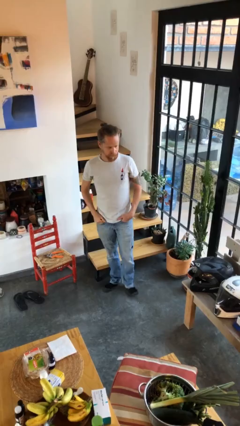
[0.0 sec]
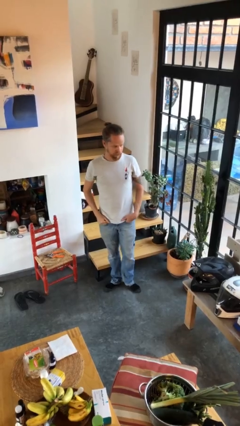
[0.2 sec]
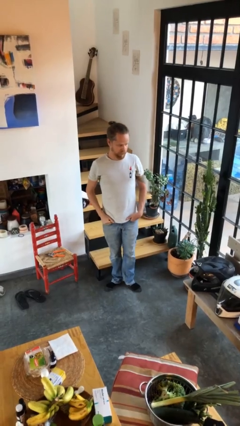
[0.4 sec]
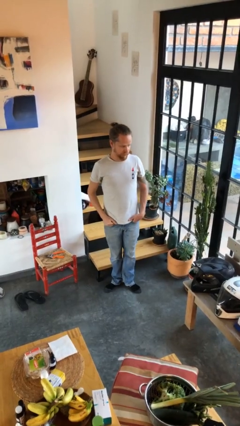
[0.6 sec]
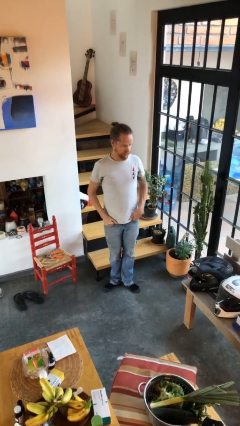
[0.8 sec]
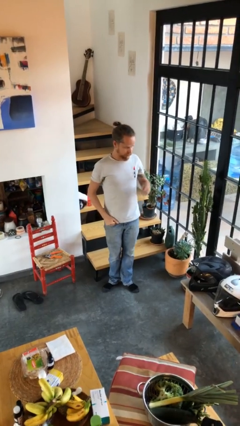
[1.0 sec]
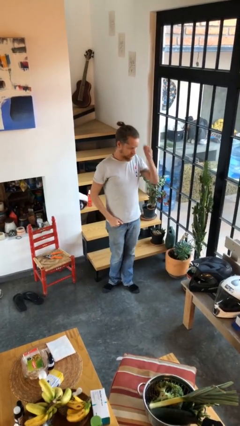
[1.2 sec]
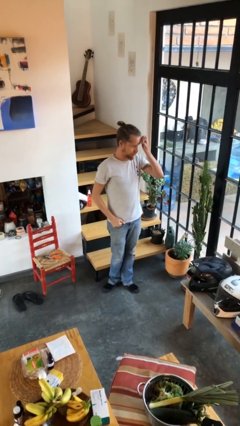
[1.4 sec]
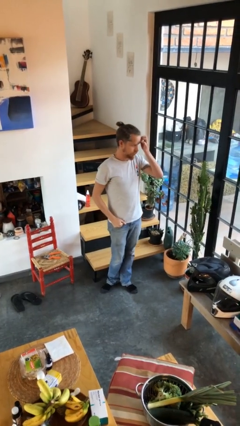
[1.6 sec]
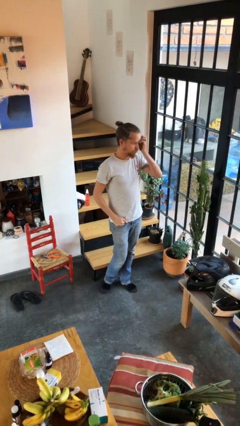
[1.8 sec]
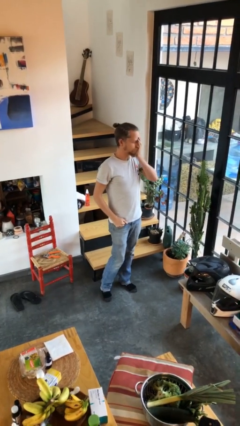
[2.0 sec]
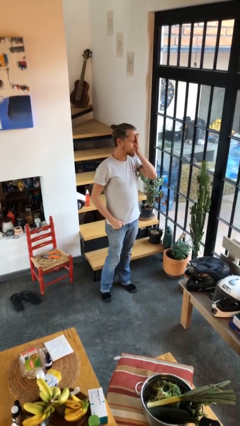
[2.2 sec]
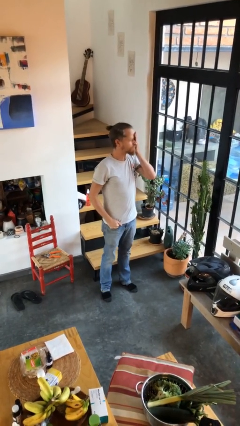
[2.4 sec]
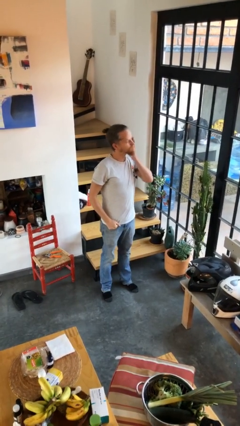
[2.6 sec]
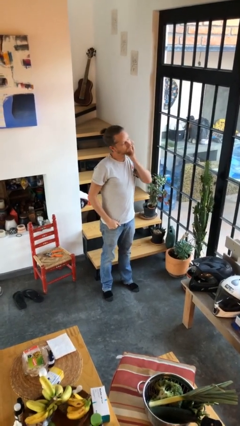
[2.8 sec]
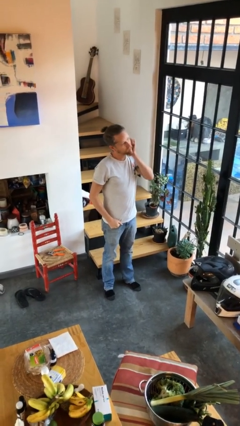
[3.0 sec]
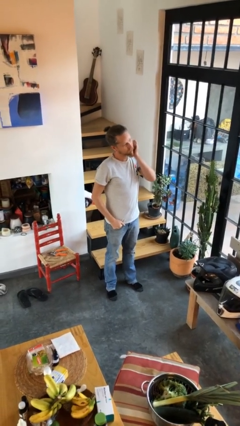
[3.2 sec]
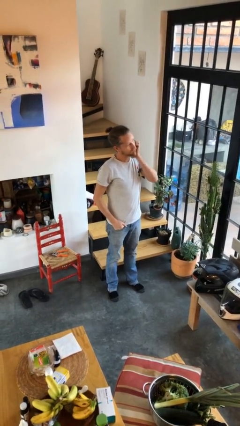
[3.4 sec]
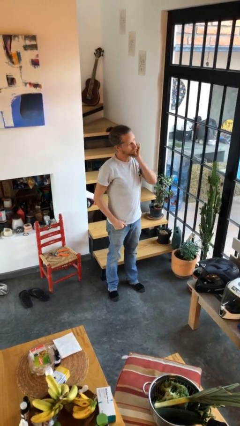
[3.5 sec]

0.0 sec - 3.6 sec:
person scratches face

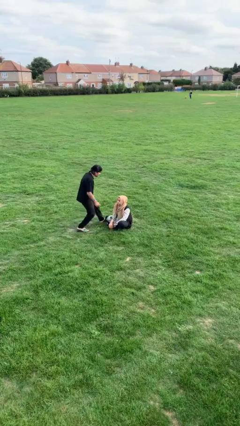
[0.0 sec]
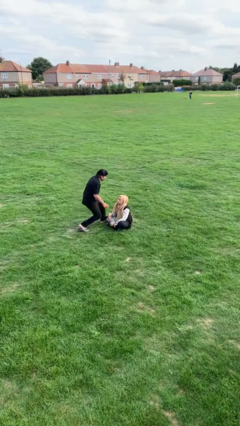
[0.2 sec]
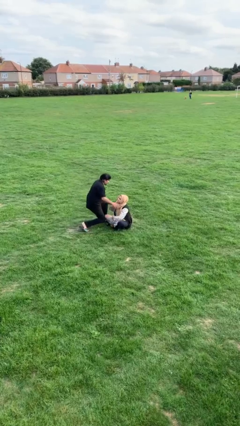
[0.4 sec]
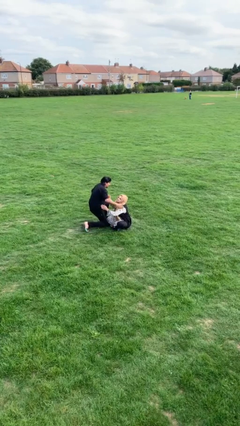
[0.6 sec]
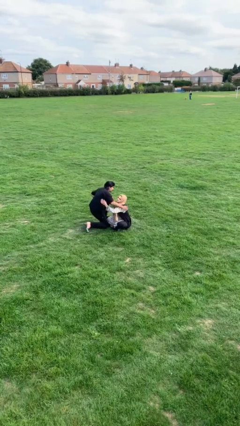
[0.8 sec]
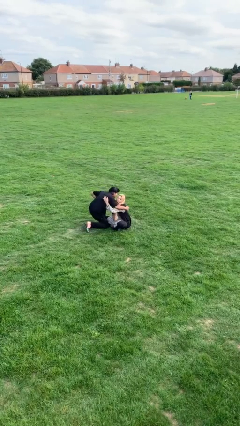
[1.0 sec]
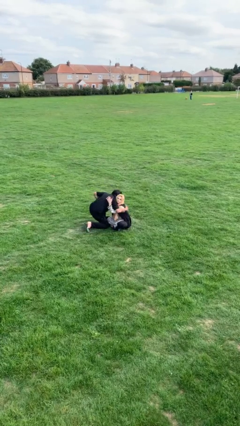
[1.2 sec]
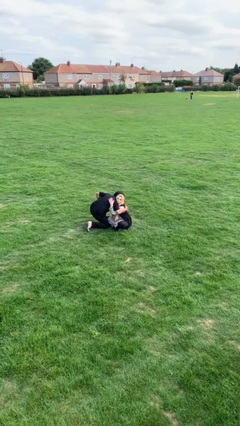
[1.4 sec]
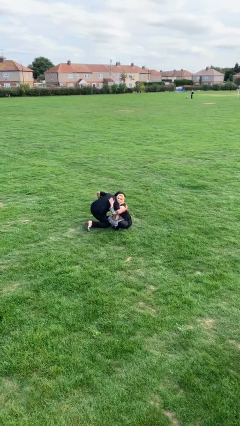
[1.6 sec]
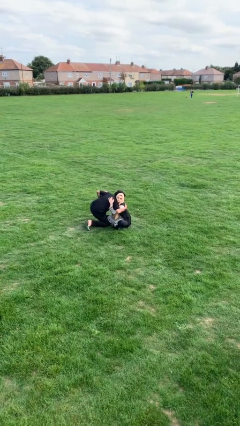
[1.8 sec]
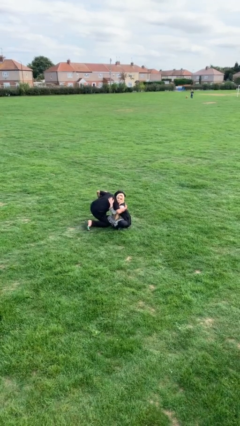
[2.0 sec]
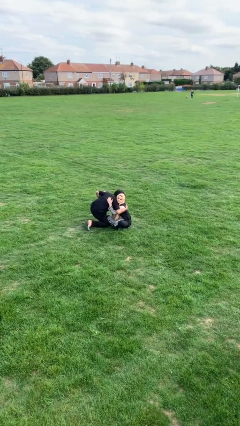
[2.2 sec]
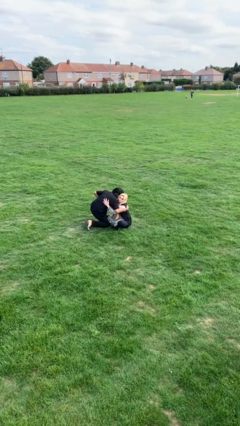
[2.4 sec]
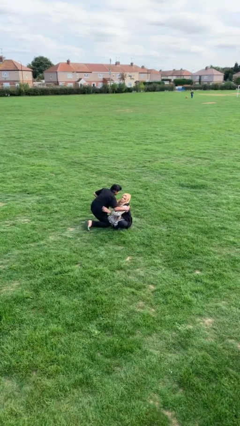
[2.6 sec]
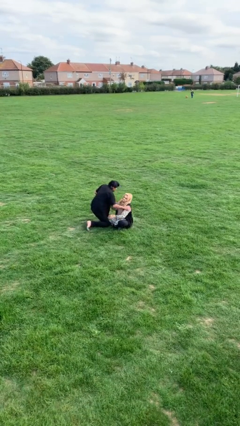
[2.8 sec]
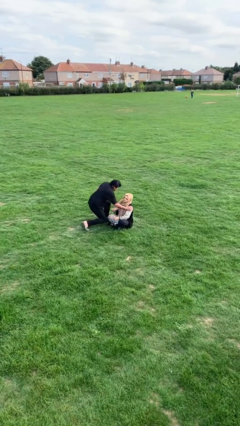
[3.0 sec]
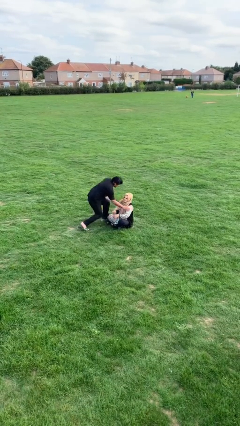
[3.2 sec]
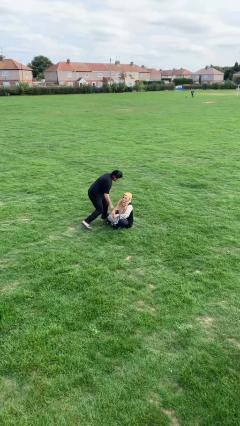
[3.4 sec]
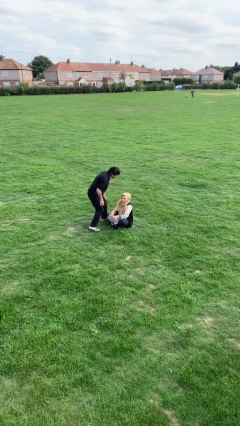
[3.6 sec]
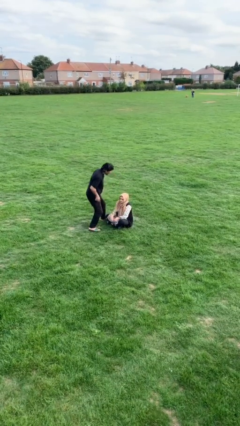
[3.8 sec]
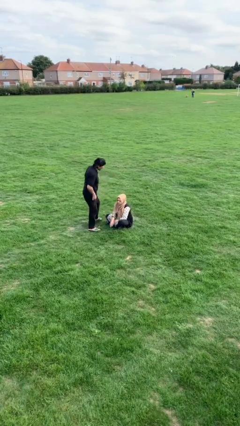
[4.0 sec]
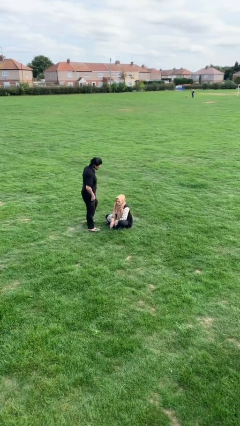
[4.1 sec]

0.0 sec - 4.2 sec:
person embraces person

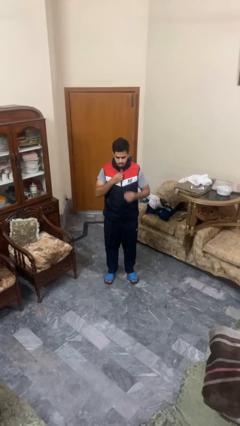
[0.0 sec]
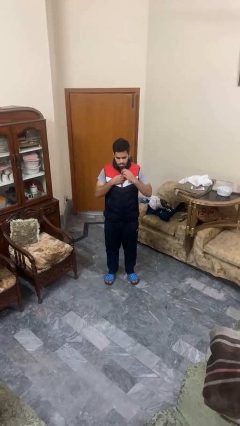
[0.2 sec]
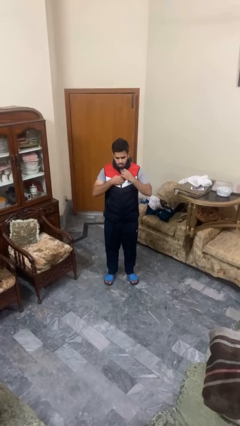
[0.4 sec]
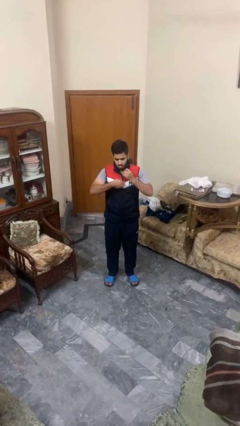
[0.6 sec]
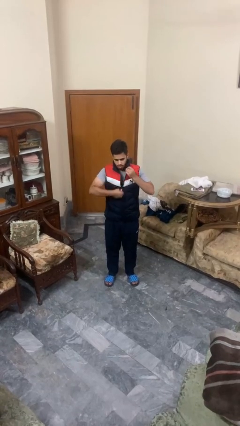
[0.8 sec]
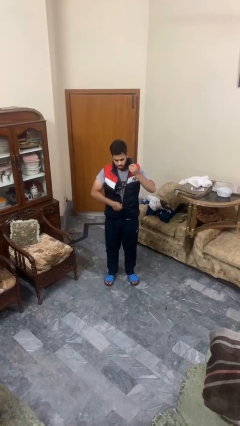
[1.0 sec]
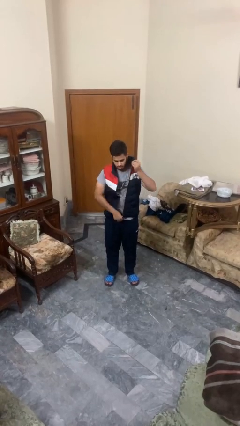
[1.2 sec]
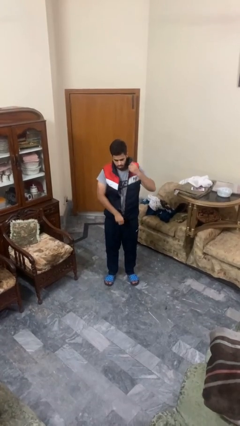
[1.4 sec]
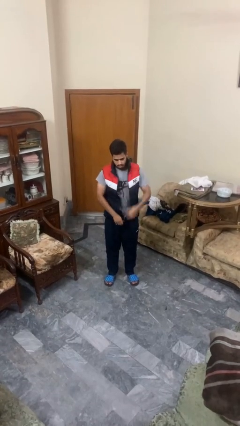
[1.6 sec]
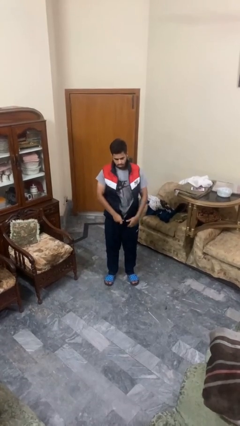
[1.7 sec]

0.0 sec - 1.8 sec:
person unzips jacket

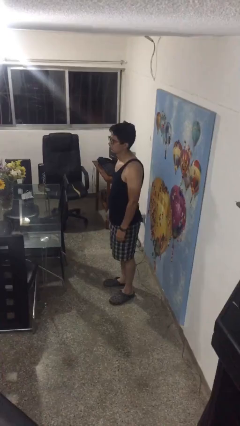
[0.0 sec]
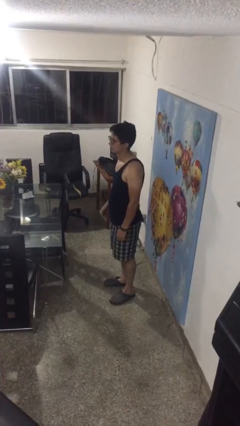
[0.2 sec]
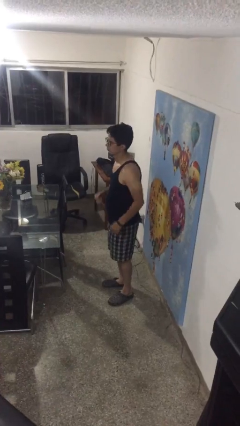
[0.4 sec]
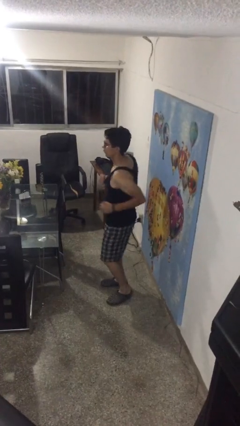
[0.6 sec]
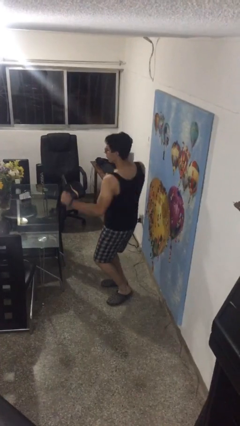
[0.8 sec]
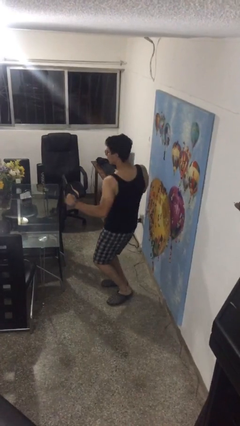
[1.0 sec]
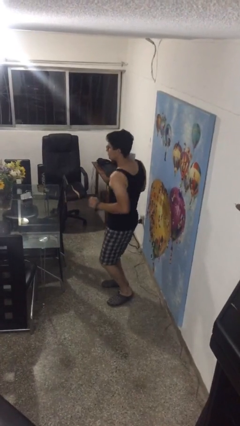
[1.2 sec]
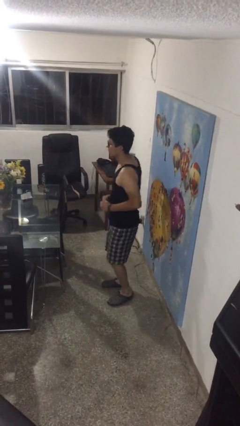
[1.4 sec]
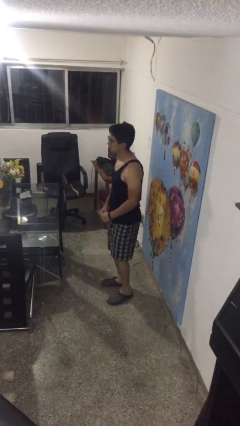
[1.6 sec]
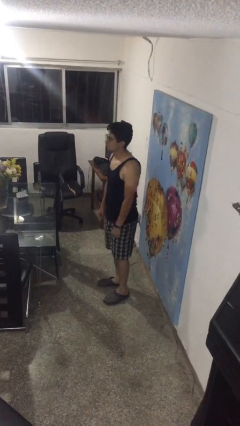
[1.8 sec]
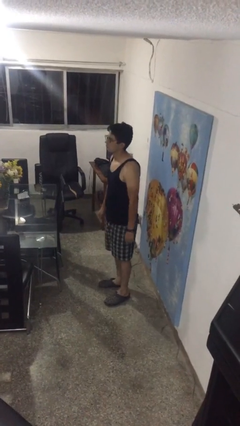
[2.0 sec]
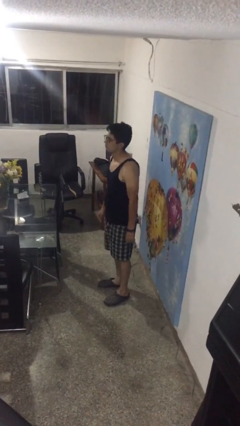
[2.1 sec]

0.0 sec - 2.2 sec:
person punches

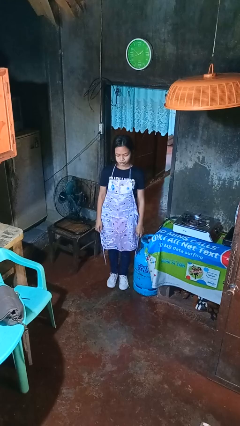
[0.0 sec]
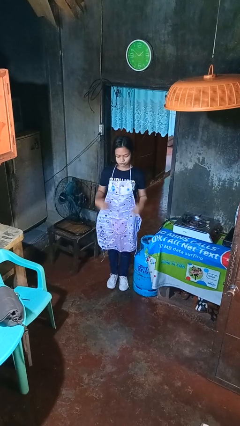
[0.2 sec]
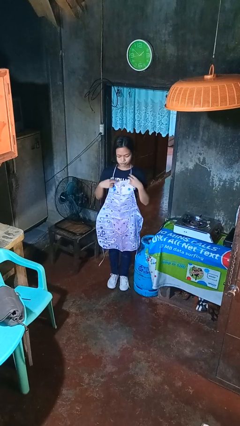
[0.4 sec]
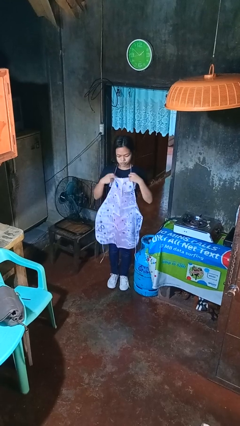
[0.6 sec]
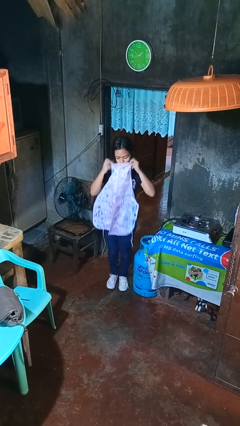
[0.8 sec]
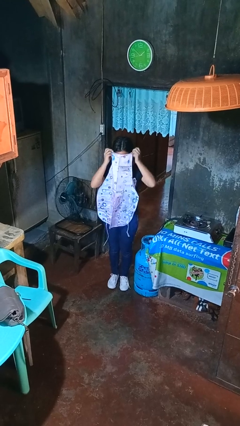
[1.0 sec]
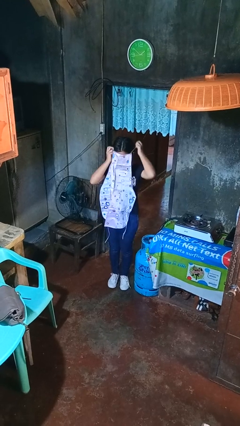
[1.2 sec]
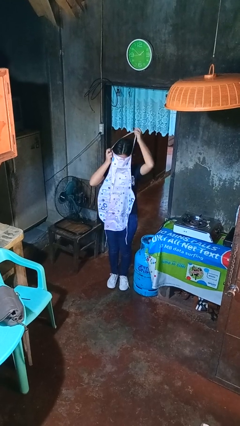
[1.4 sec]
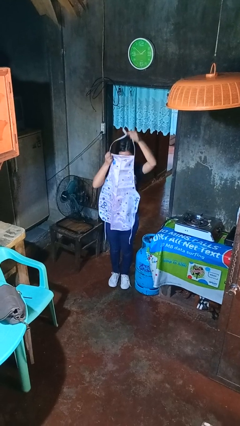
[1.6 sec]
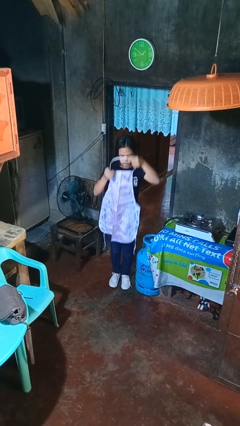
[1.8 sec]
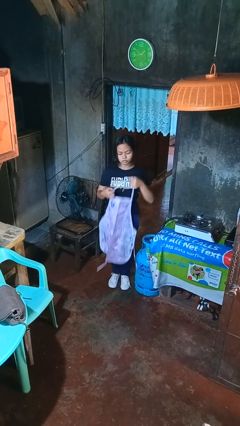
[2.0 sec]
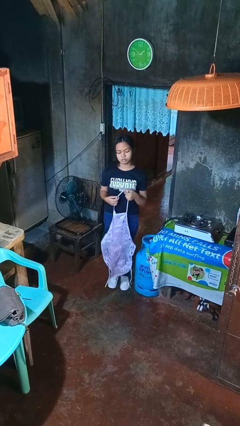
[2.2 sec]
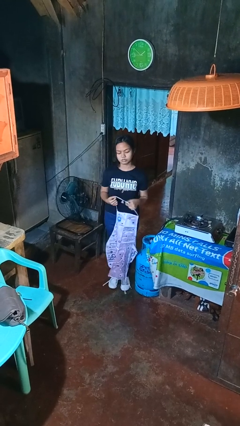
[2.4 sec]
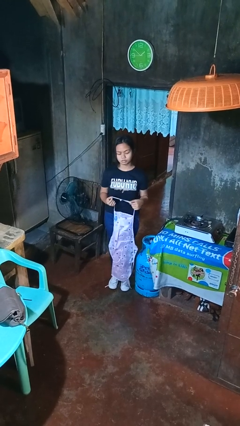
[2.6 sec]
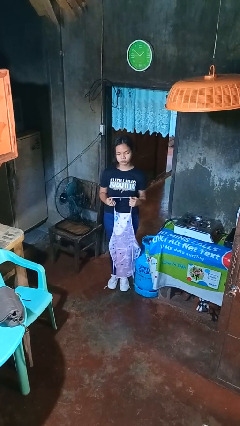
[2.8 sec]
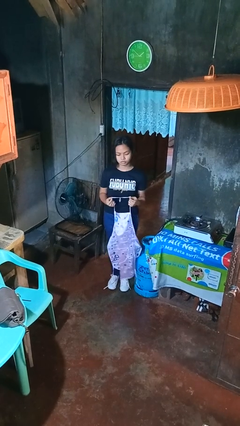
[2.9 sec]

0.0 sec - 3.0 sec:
person takes off apron

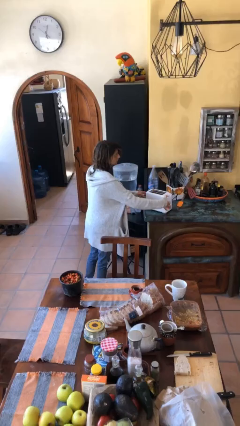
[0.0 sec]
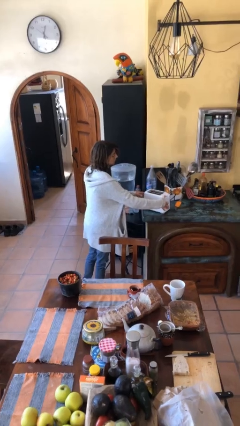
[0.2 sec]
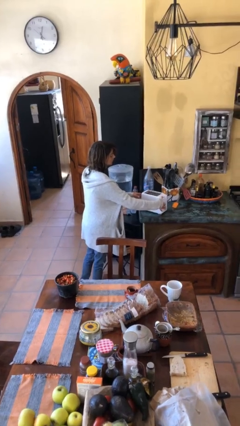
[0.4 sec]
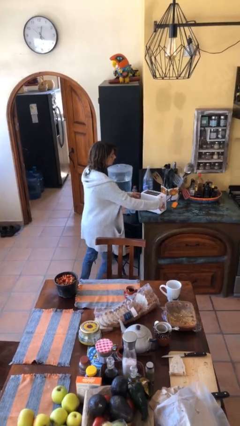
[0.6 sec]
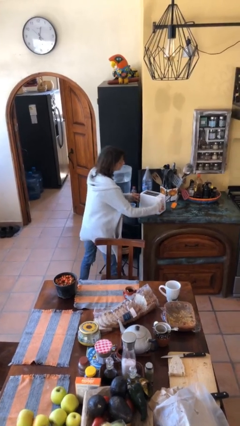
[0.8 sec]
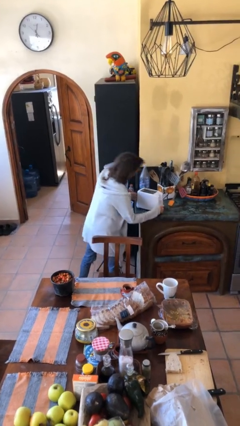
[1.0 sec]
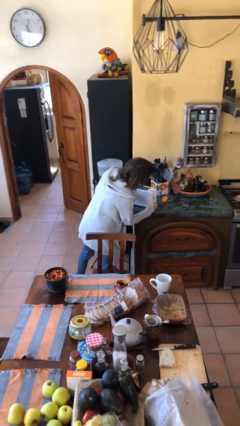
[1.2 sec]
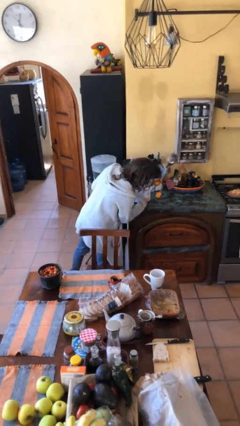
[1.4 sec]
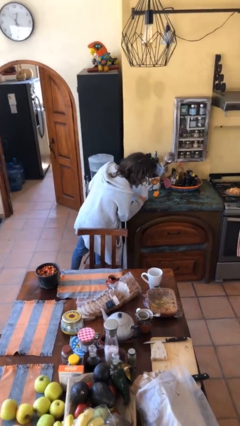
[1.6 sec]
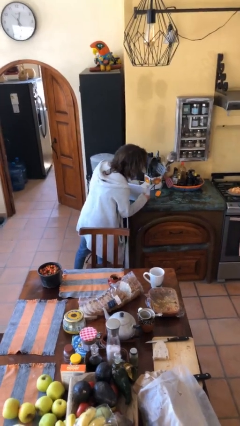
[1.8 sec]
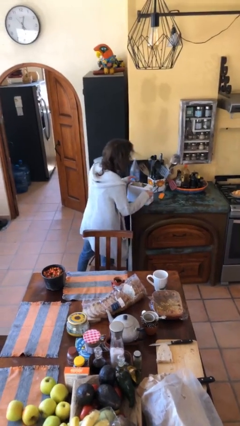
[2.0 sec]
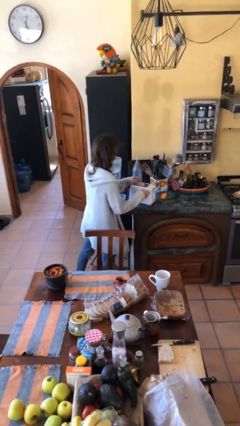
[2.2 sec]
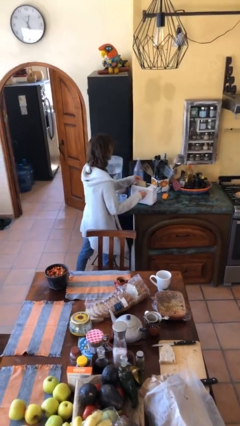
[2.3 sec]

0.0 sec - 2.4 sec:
person takes object from toaster

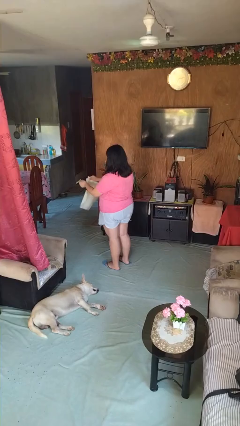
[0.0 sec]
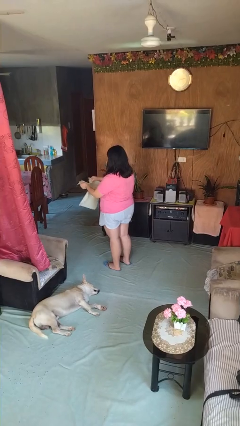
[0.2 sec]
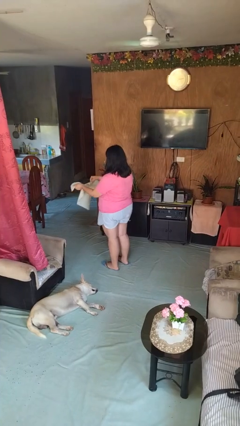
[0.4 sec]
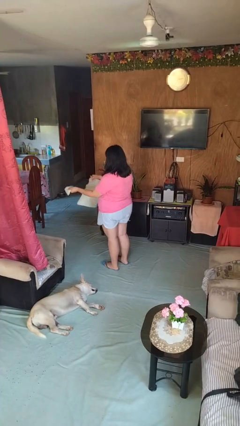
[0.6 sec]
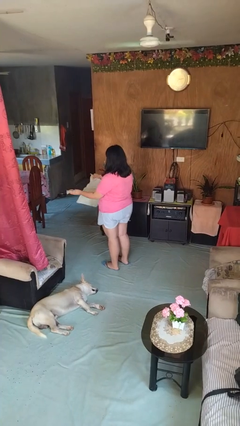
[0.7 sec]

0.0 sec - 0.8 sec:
person tears paper
